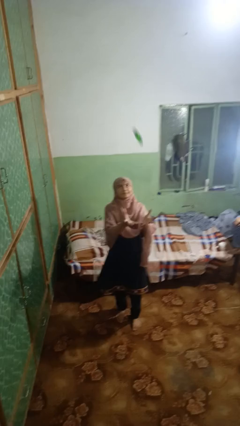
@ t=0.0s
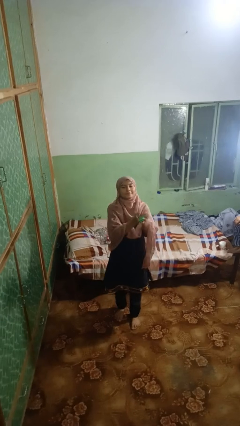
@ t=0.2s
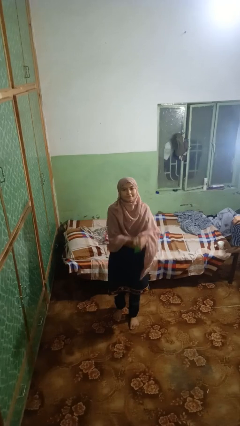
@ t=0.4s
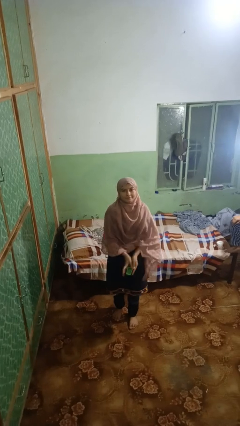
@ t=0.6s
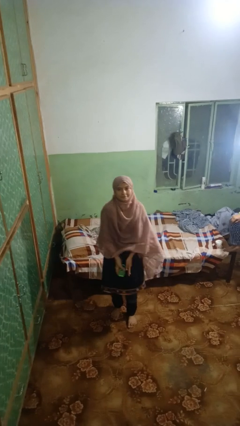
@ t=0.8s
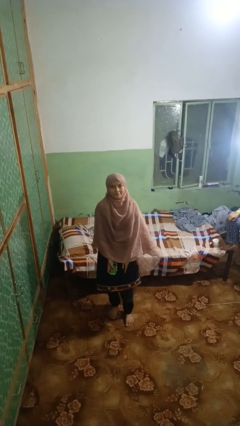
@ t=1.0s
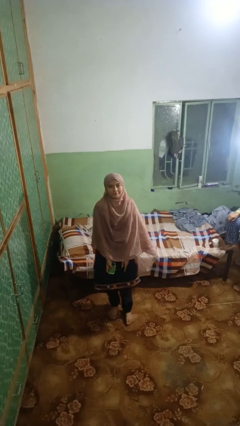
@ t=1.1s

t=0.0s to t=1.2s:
person picks up object from floor

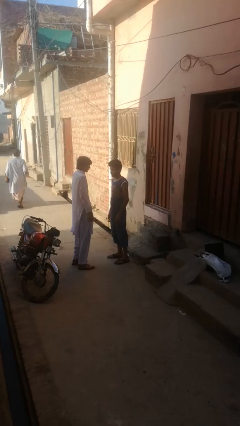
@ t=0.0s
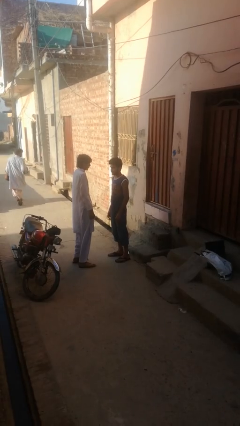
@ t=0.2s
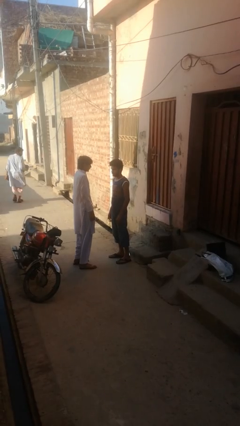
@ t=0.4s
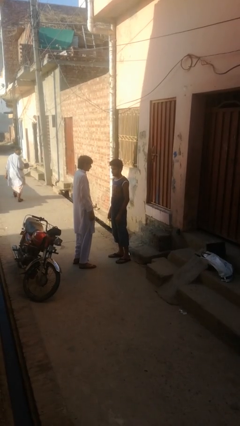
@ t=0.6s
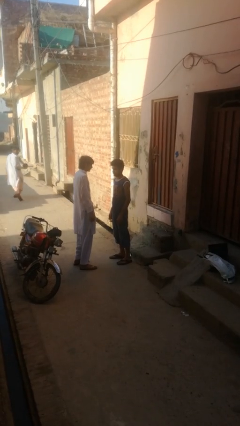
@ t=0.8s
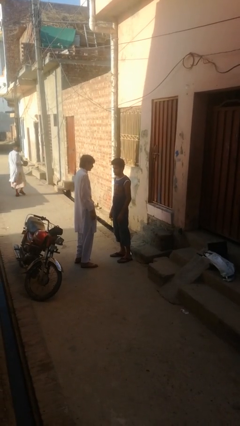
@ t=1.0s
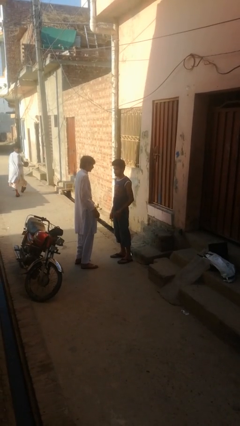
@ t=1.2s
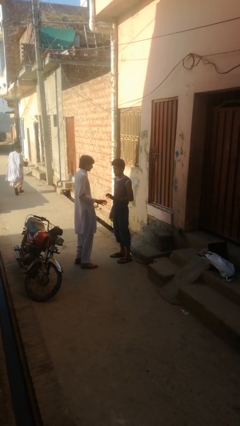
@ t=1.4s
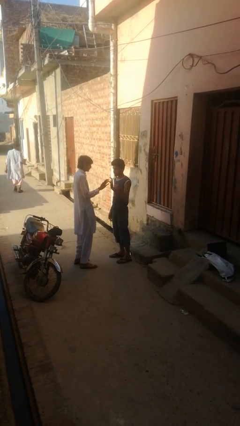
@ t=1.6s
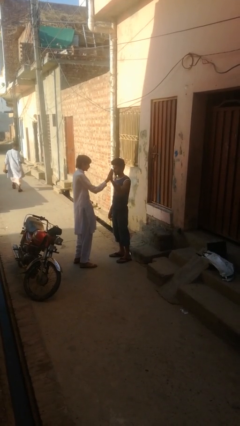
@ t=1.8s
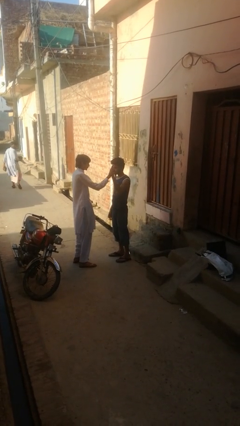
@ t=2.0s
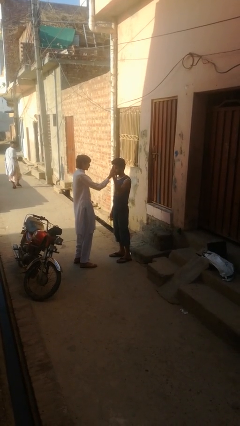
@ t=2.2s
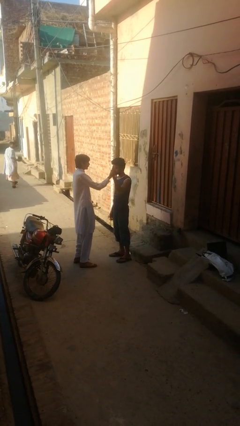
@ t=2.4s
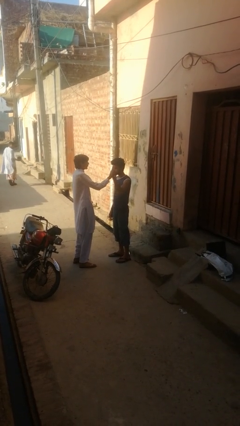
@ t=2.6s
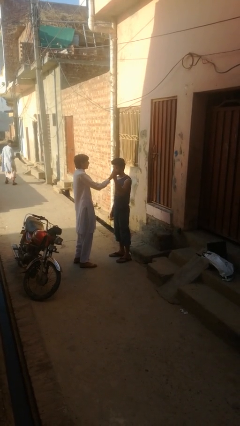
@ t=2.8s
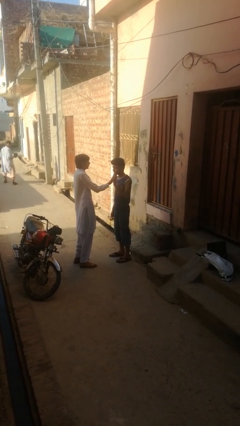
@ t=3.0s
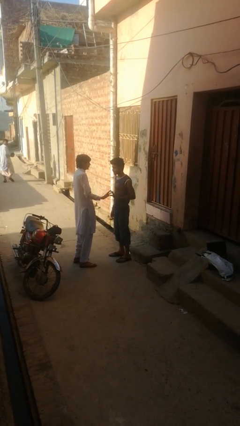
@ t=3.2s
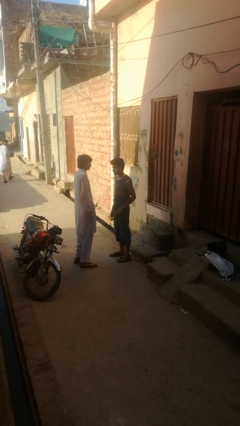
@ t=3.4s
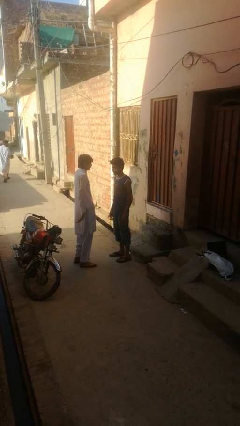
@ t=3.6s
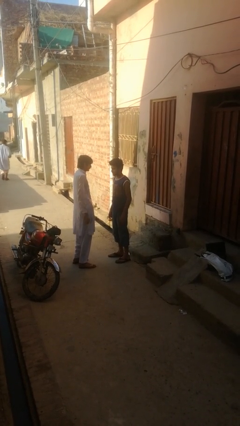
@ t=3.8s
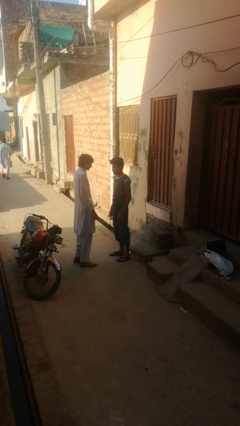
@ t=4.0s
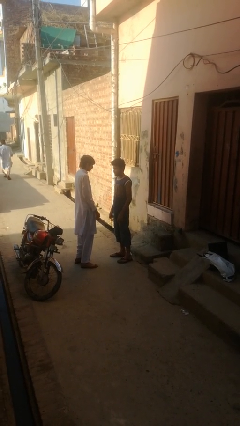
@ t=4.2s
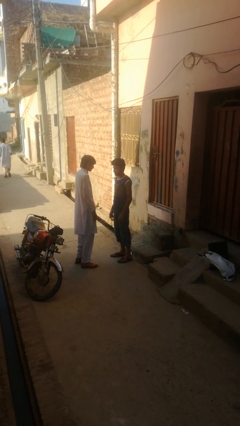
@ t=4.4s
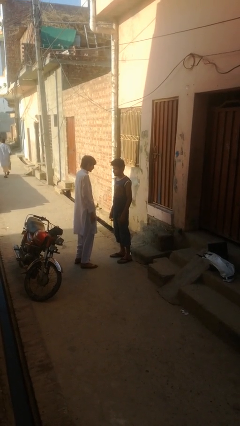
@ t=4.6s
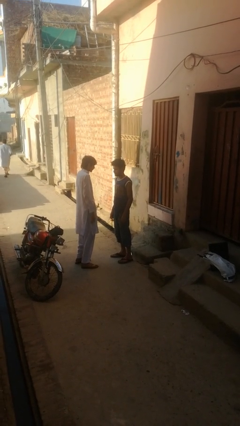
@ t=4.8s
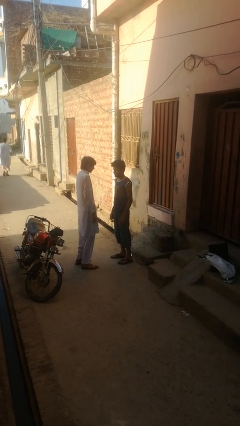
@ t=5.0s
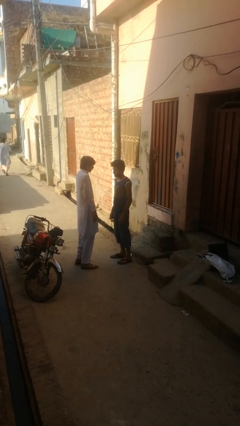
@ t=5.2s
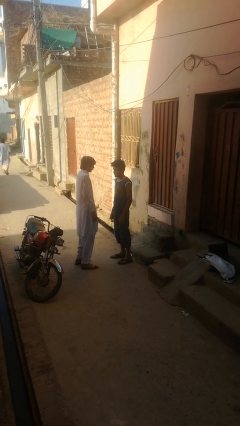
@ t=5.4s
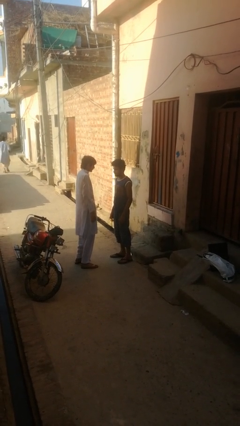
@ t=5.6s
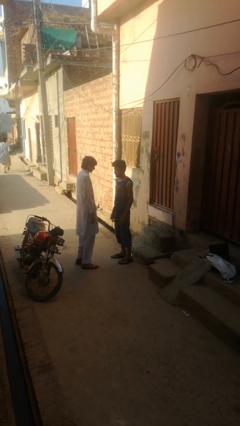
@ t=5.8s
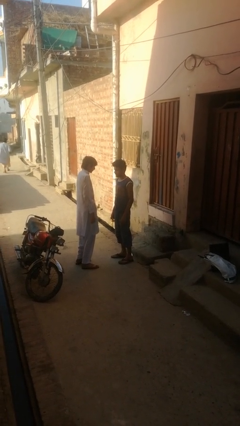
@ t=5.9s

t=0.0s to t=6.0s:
person highfives hand

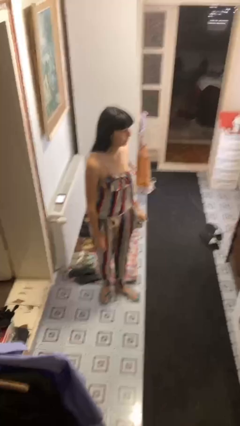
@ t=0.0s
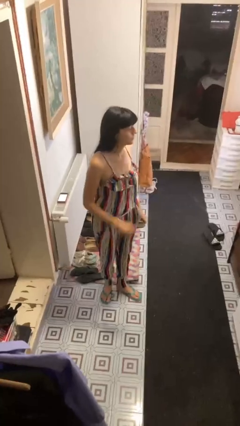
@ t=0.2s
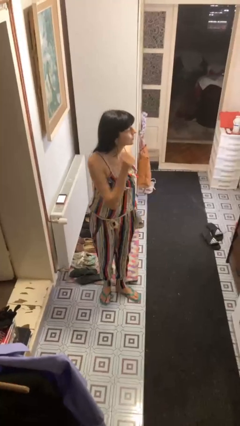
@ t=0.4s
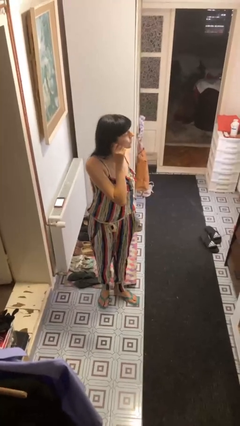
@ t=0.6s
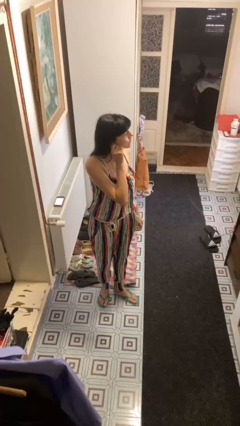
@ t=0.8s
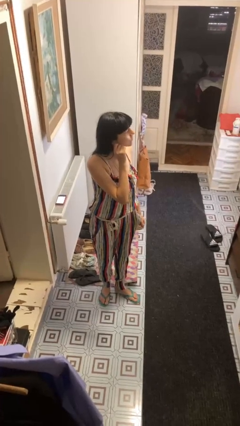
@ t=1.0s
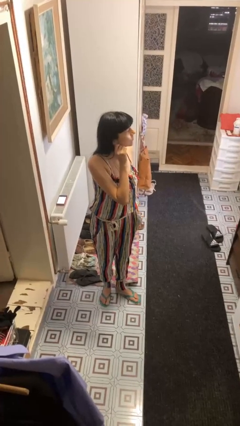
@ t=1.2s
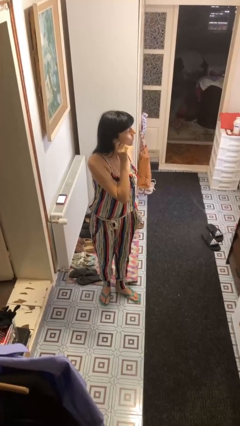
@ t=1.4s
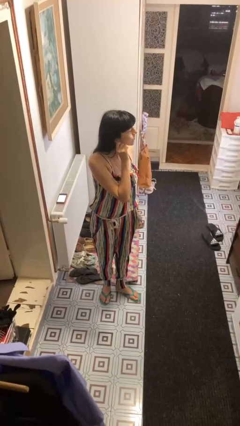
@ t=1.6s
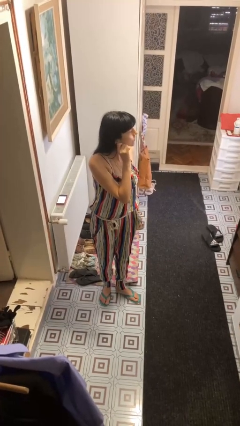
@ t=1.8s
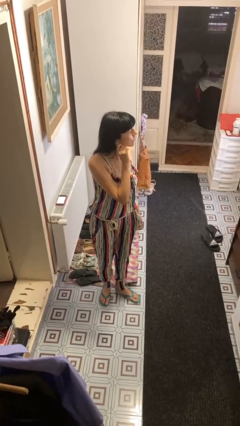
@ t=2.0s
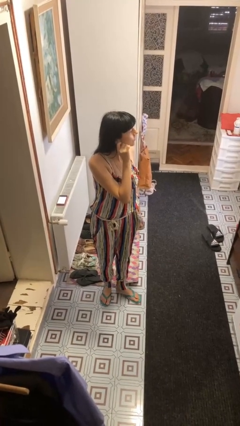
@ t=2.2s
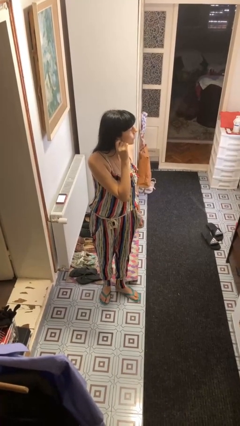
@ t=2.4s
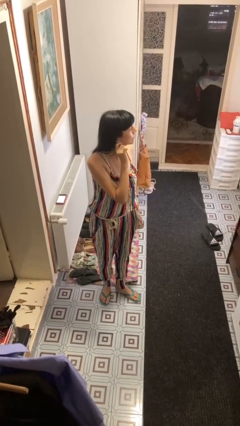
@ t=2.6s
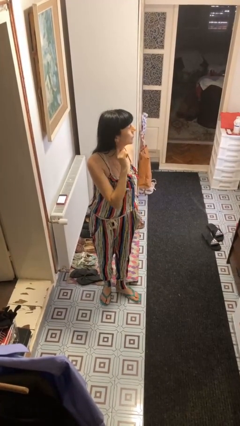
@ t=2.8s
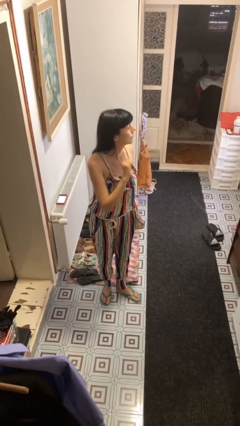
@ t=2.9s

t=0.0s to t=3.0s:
person touches earlobe

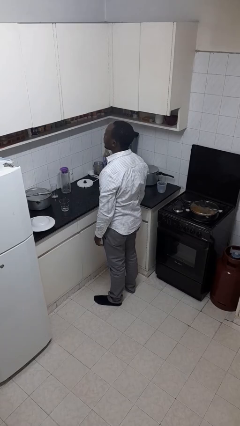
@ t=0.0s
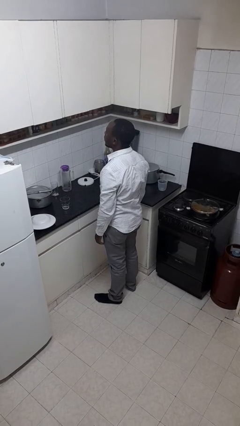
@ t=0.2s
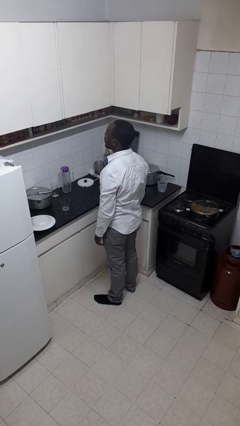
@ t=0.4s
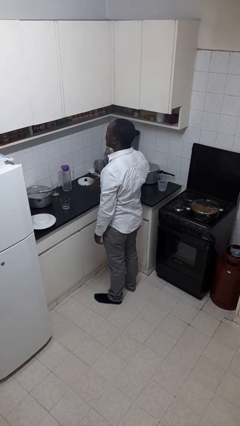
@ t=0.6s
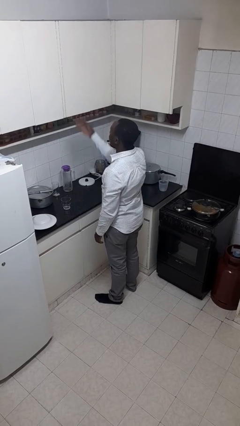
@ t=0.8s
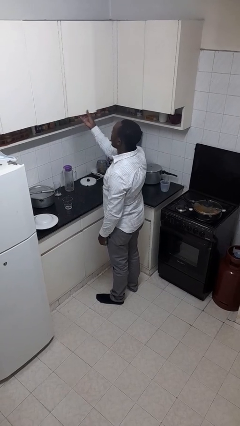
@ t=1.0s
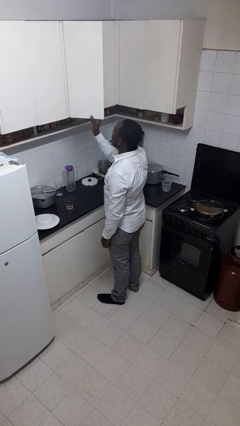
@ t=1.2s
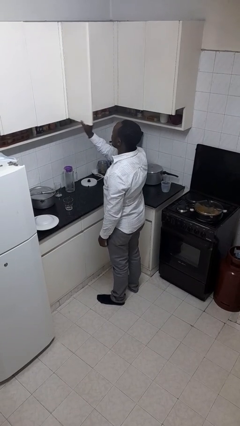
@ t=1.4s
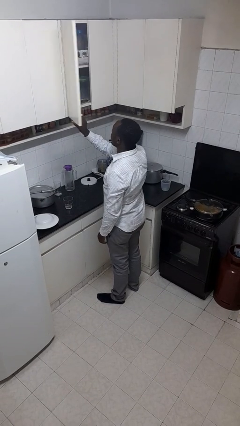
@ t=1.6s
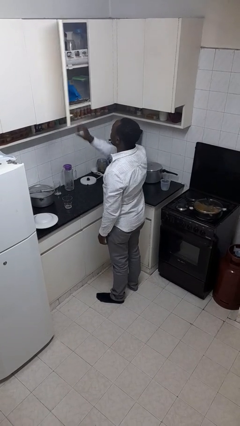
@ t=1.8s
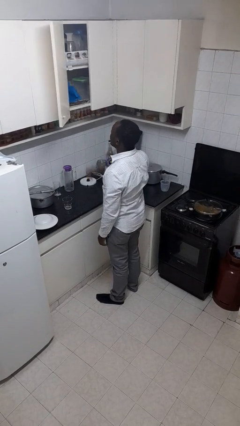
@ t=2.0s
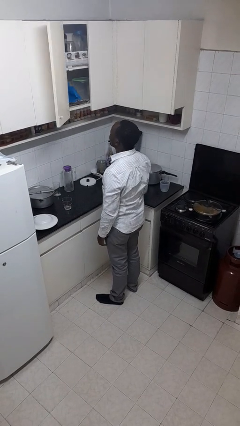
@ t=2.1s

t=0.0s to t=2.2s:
person opens cabinet

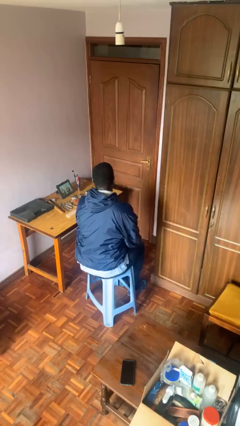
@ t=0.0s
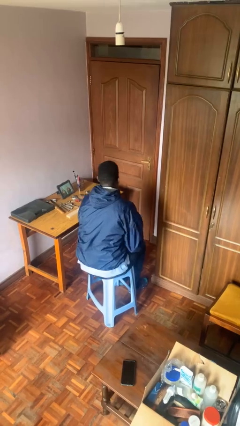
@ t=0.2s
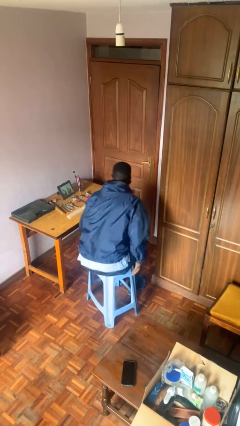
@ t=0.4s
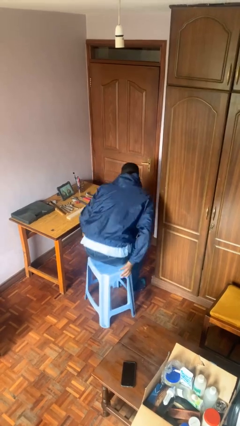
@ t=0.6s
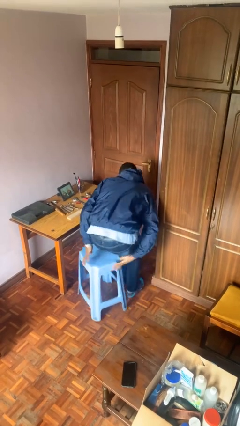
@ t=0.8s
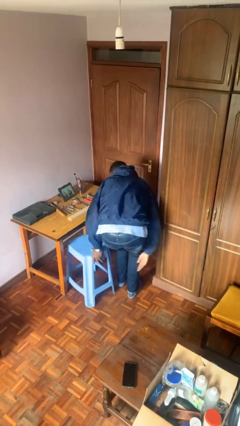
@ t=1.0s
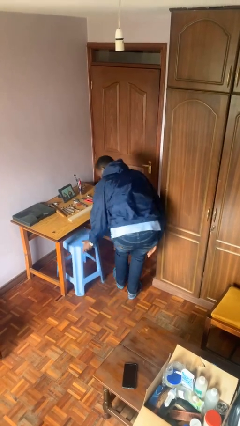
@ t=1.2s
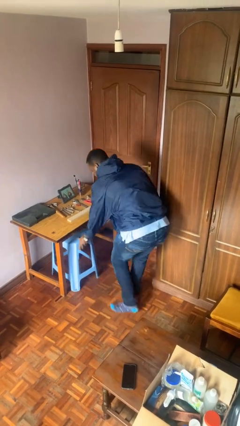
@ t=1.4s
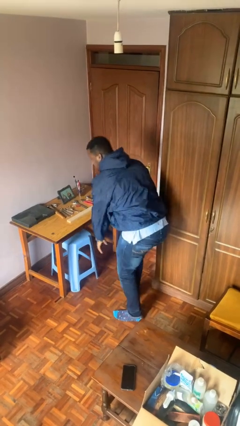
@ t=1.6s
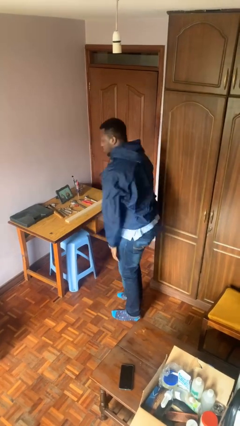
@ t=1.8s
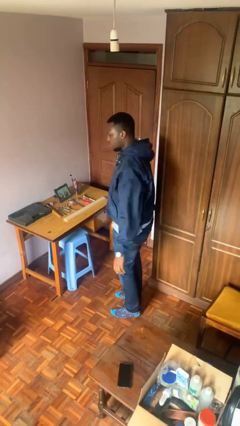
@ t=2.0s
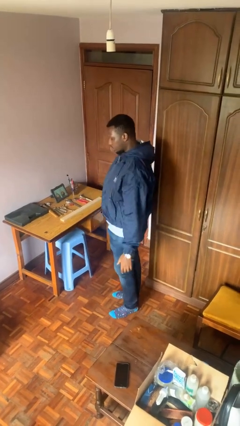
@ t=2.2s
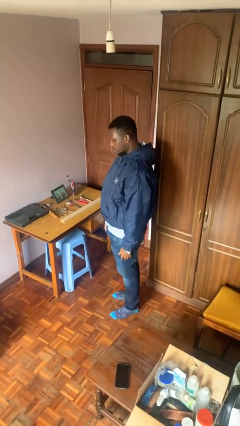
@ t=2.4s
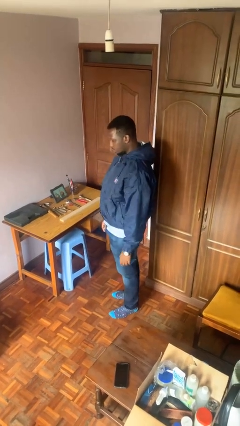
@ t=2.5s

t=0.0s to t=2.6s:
person stands up

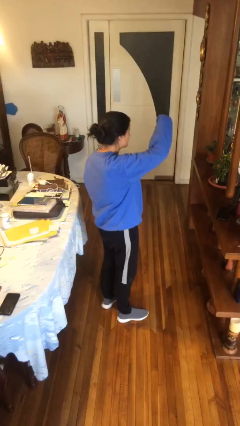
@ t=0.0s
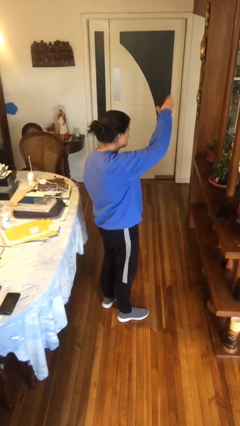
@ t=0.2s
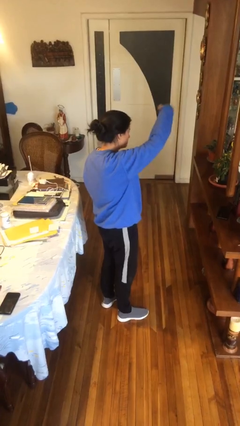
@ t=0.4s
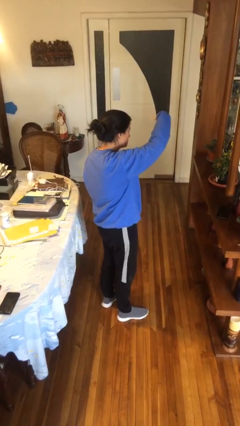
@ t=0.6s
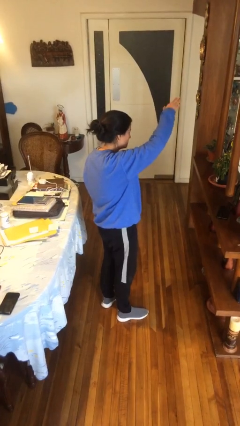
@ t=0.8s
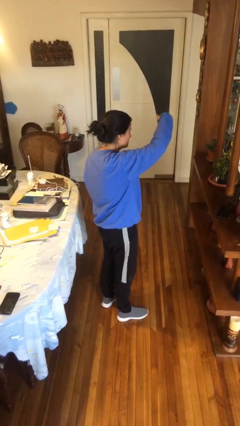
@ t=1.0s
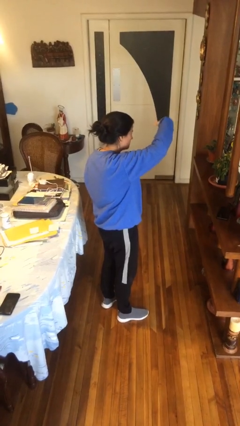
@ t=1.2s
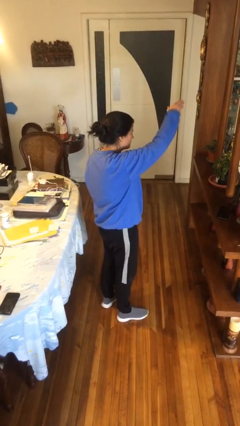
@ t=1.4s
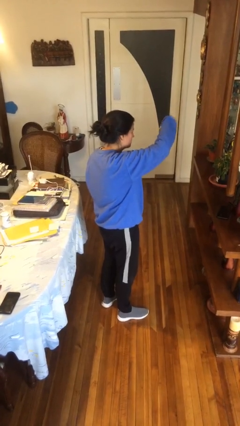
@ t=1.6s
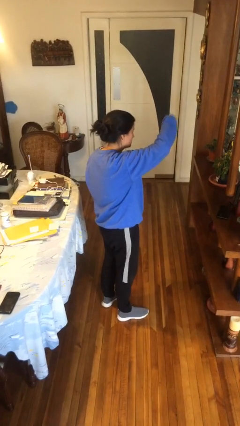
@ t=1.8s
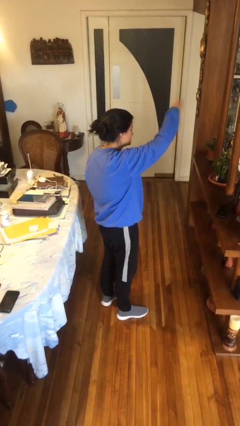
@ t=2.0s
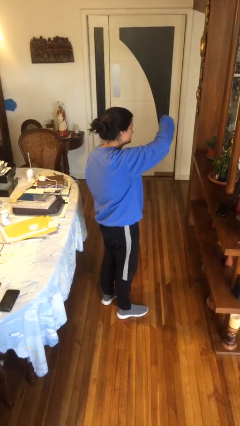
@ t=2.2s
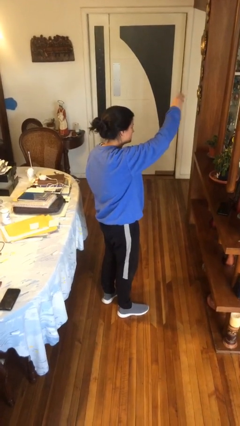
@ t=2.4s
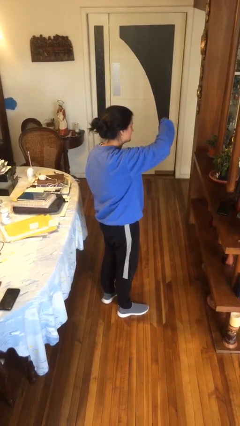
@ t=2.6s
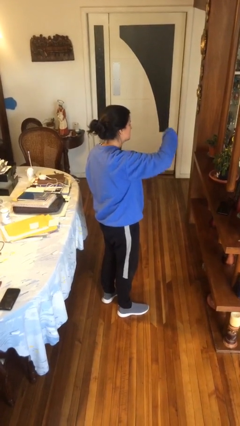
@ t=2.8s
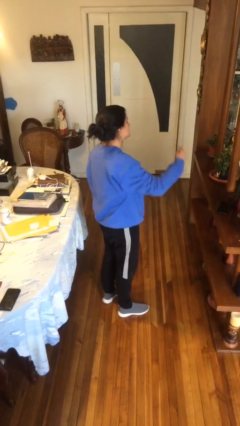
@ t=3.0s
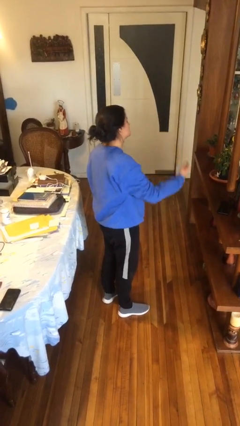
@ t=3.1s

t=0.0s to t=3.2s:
person gestures come here
